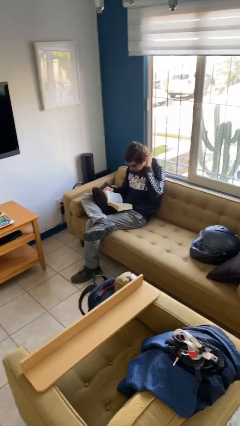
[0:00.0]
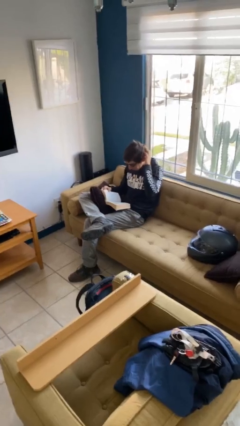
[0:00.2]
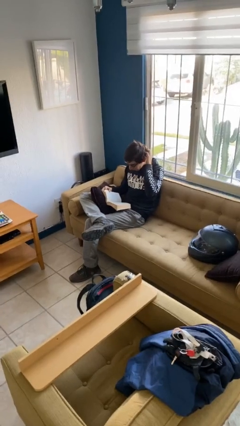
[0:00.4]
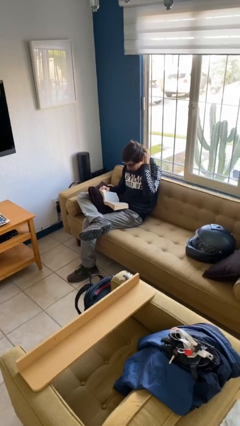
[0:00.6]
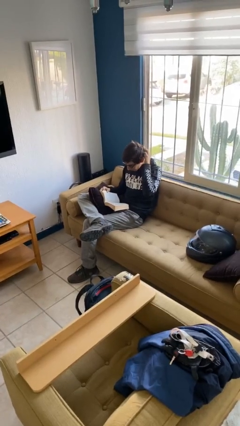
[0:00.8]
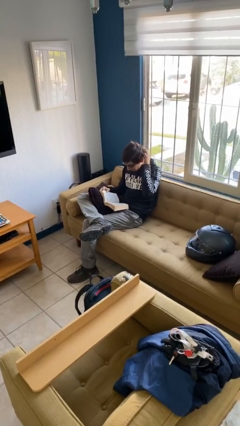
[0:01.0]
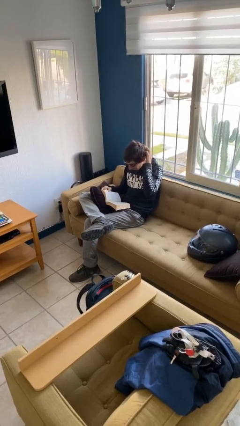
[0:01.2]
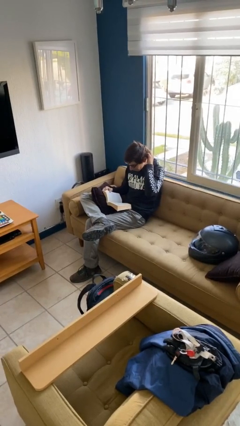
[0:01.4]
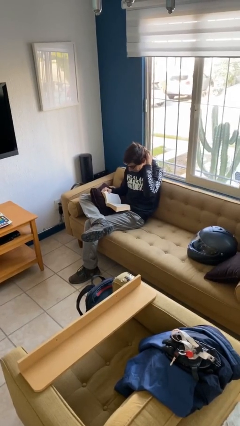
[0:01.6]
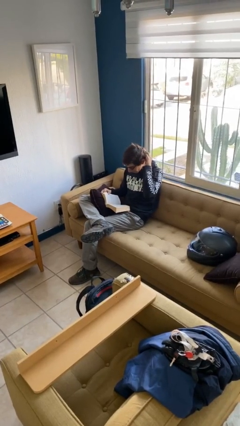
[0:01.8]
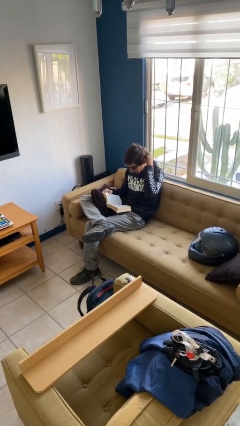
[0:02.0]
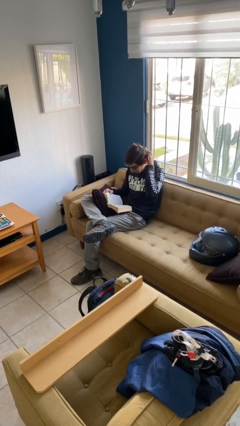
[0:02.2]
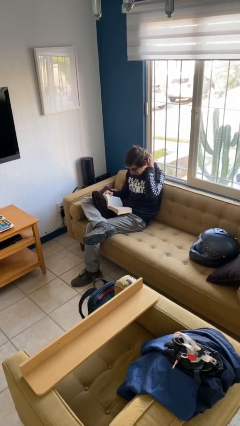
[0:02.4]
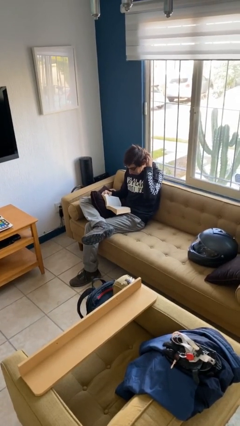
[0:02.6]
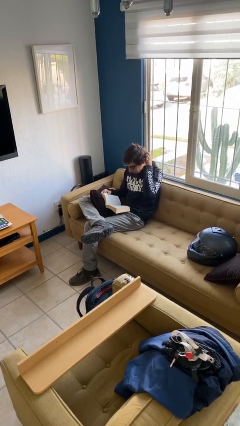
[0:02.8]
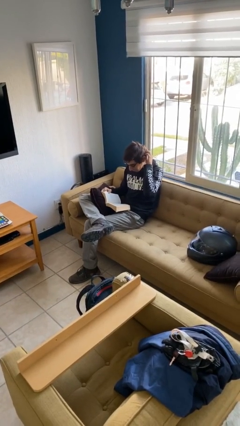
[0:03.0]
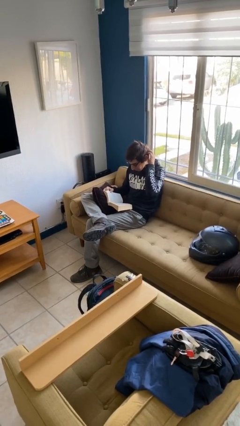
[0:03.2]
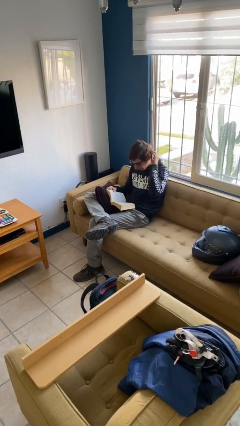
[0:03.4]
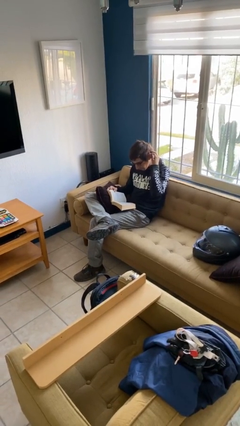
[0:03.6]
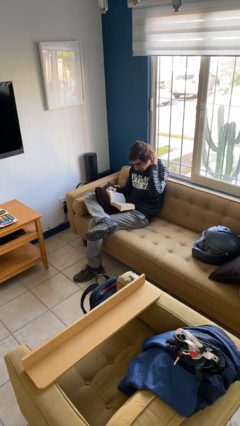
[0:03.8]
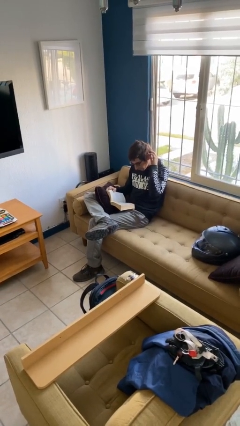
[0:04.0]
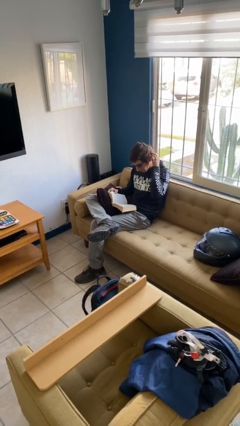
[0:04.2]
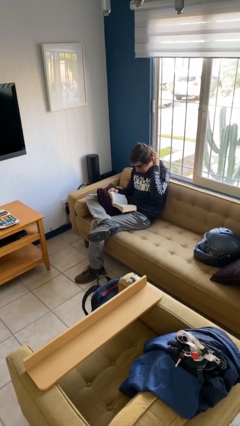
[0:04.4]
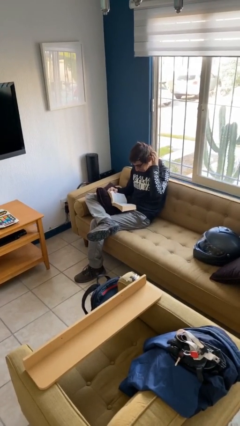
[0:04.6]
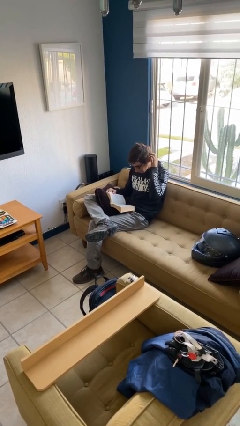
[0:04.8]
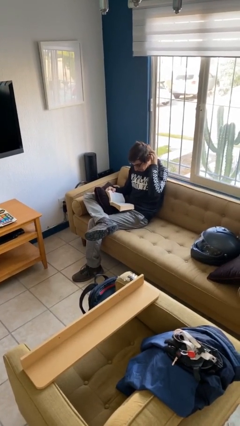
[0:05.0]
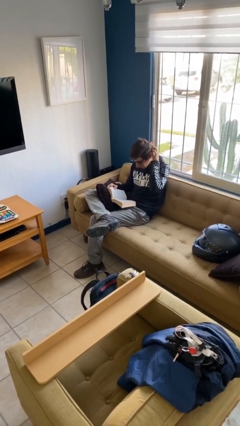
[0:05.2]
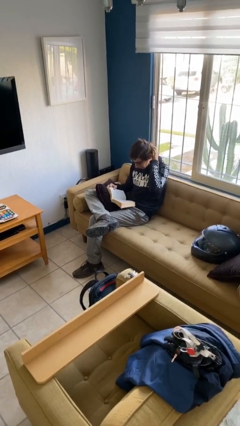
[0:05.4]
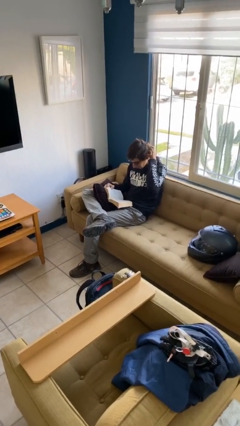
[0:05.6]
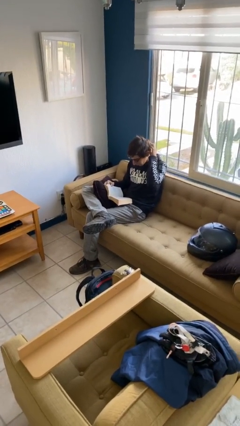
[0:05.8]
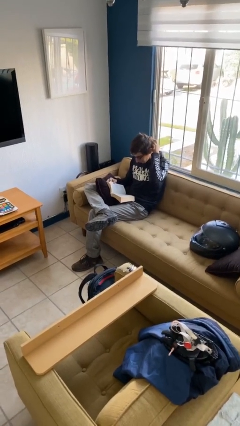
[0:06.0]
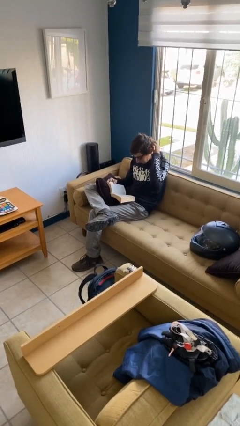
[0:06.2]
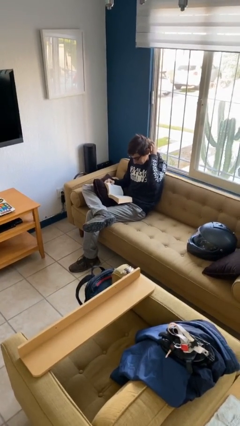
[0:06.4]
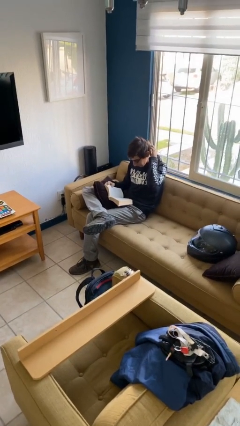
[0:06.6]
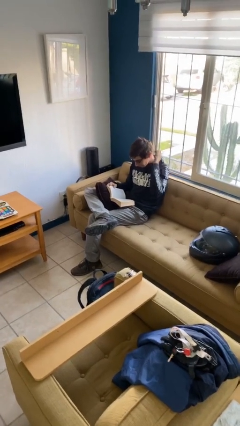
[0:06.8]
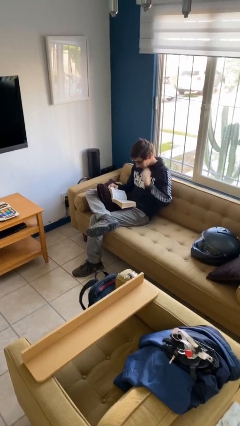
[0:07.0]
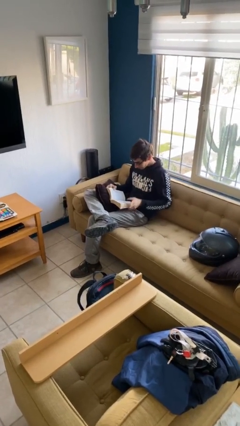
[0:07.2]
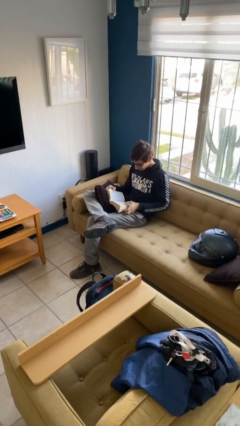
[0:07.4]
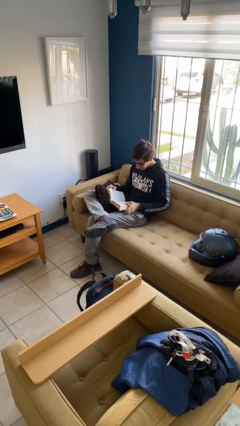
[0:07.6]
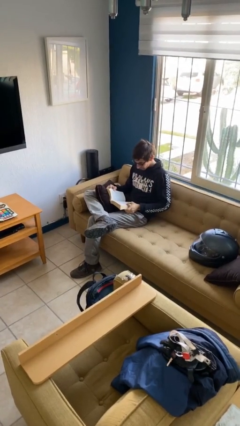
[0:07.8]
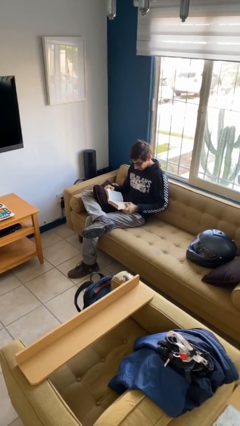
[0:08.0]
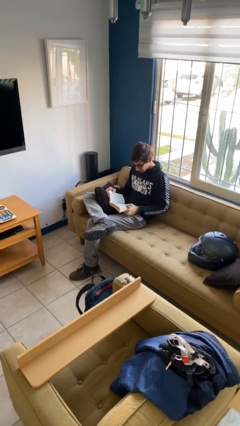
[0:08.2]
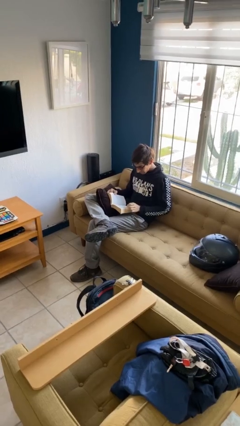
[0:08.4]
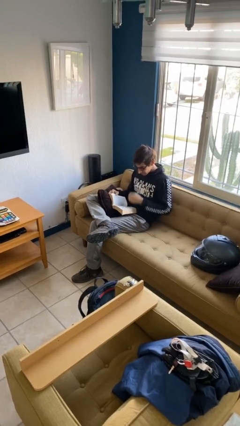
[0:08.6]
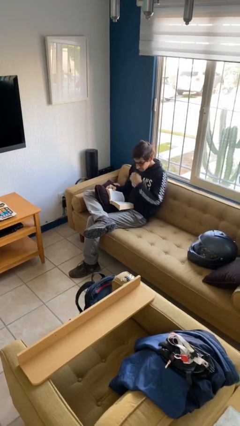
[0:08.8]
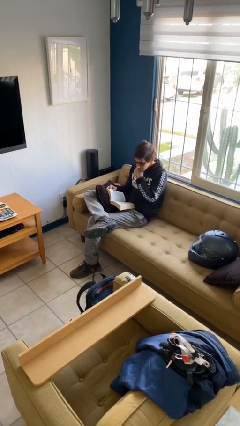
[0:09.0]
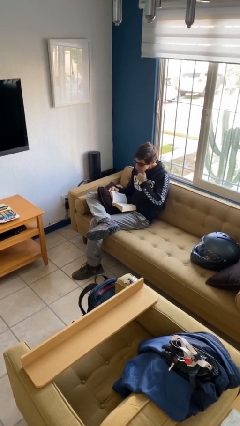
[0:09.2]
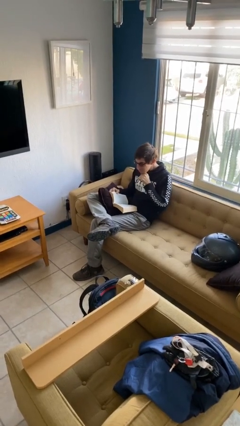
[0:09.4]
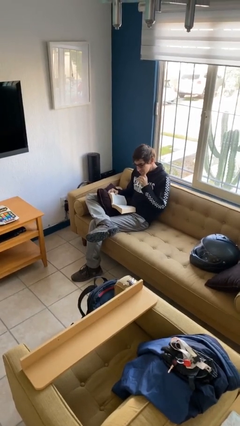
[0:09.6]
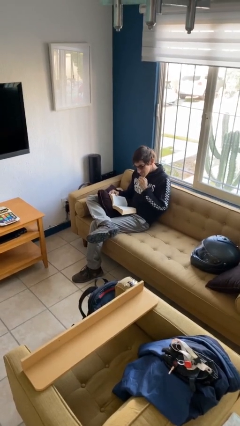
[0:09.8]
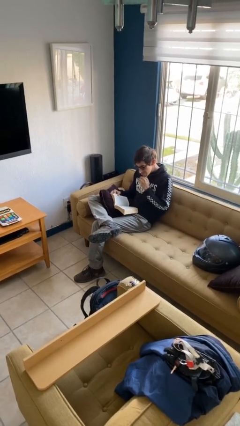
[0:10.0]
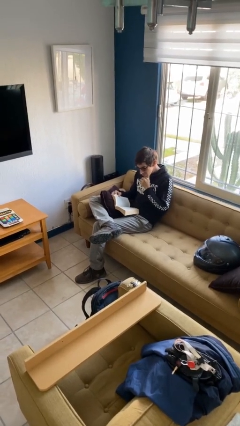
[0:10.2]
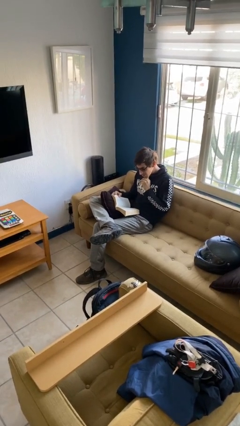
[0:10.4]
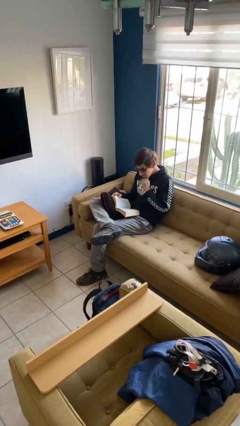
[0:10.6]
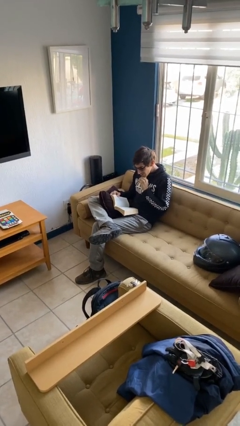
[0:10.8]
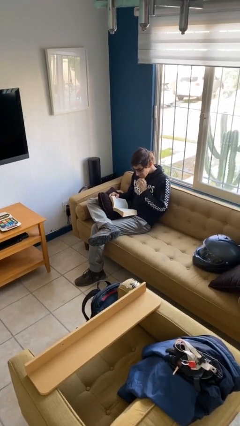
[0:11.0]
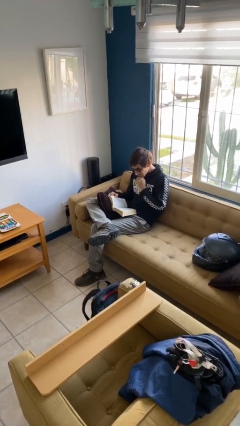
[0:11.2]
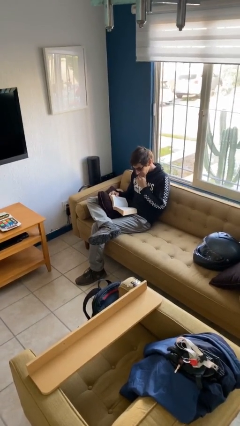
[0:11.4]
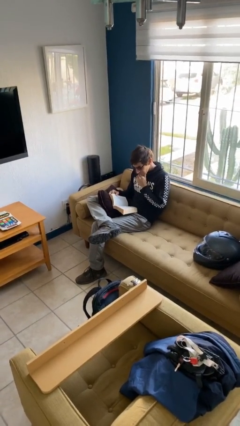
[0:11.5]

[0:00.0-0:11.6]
person reads document

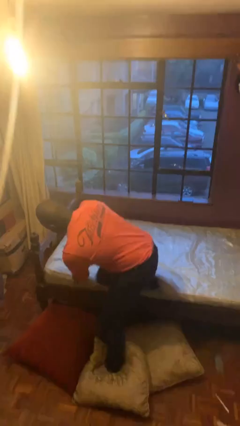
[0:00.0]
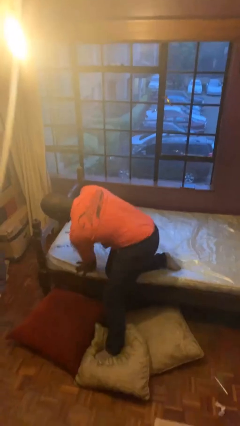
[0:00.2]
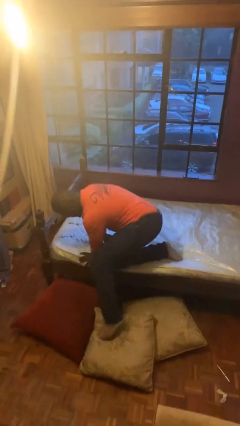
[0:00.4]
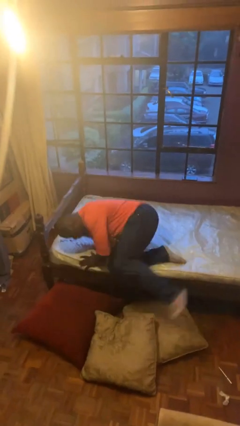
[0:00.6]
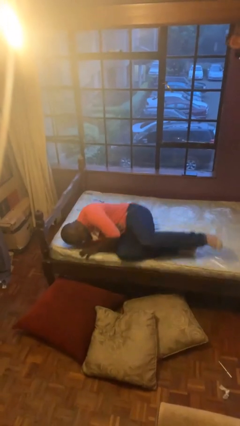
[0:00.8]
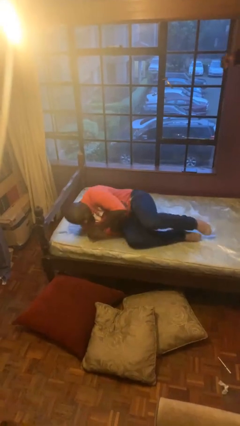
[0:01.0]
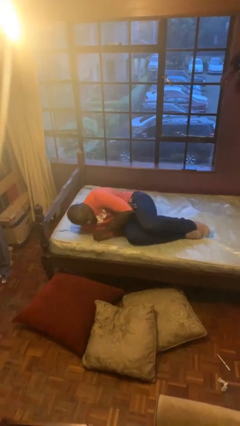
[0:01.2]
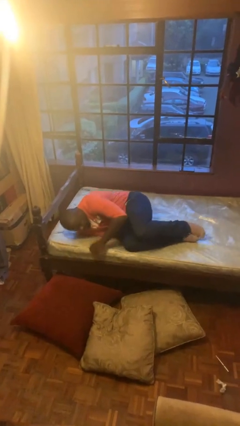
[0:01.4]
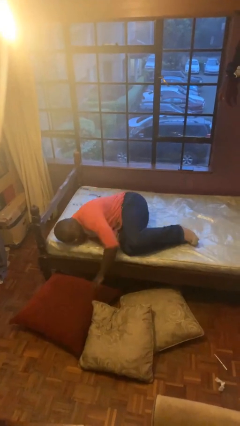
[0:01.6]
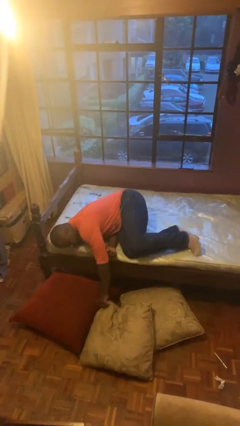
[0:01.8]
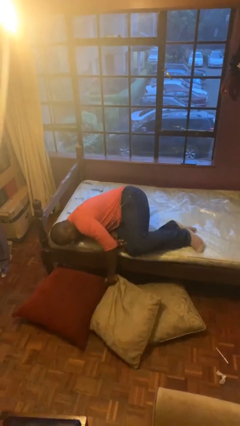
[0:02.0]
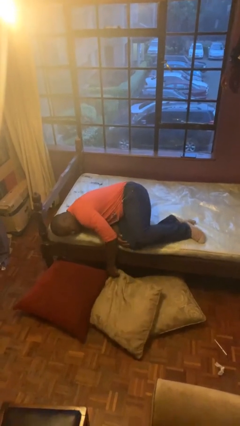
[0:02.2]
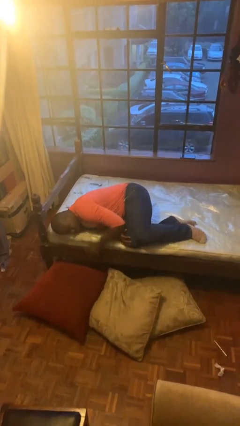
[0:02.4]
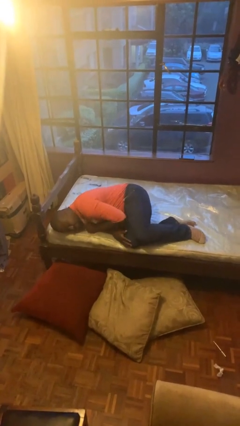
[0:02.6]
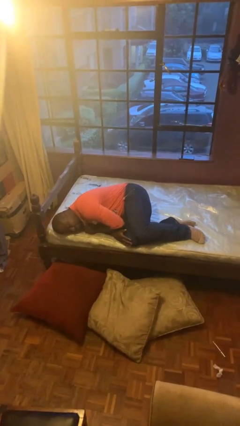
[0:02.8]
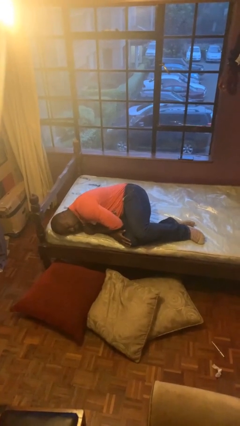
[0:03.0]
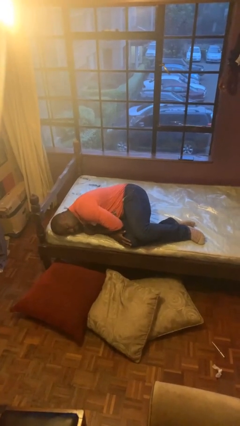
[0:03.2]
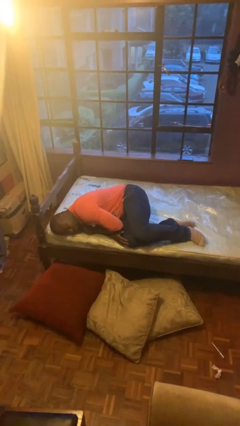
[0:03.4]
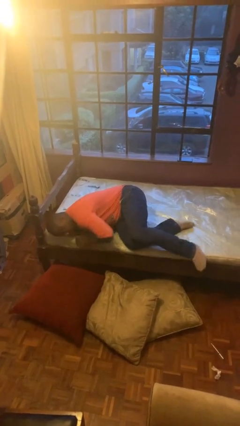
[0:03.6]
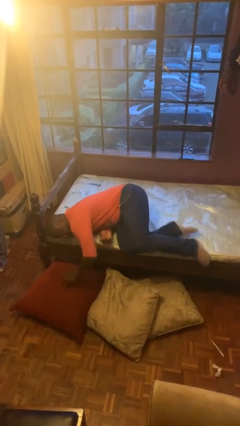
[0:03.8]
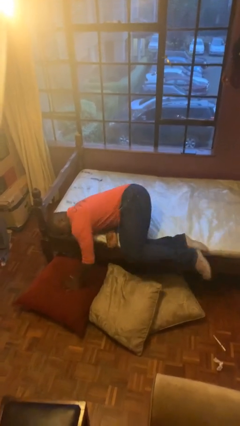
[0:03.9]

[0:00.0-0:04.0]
person lies down on bed

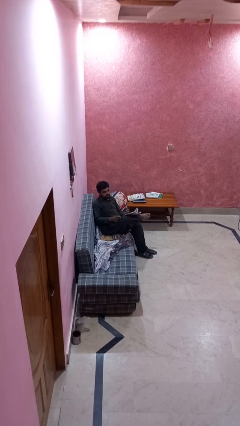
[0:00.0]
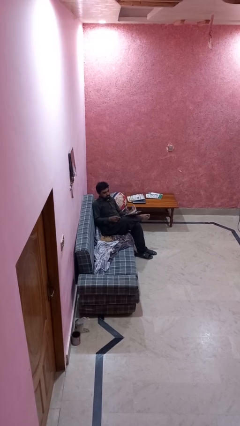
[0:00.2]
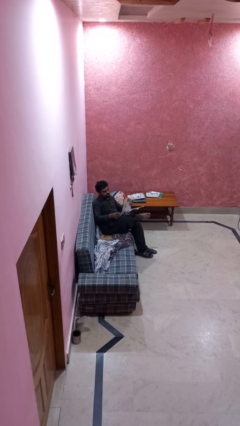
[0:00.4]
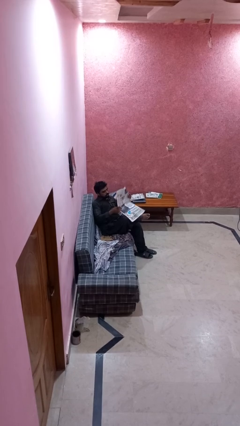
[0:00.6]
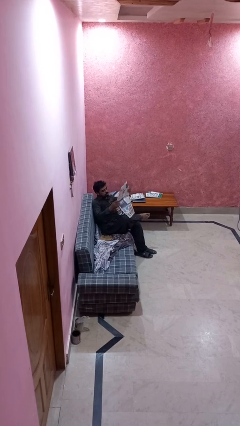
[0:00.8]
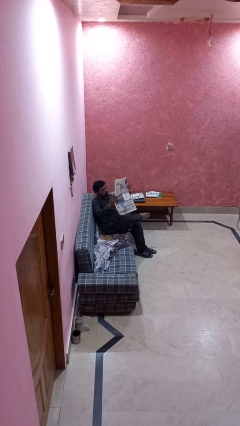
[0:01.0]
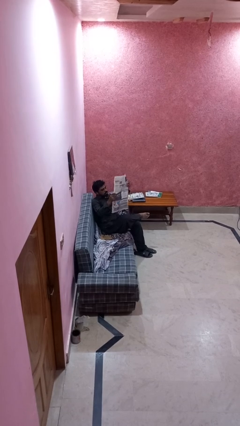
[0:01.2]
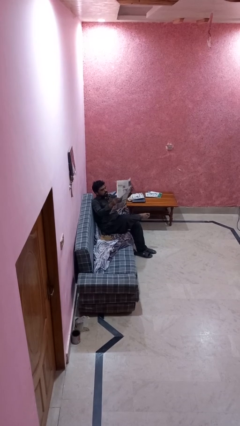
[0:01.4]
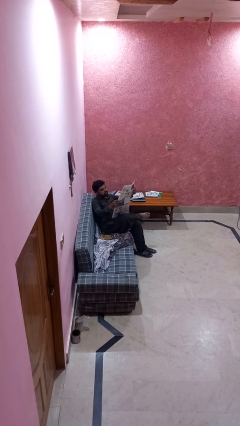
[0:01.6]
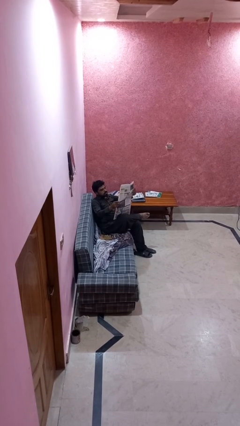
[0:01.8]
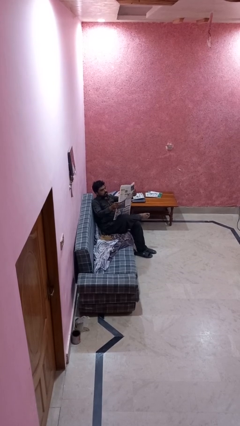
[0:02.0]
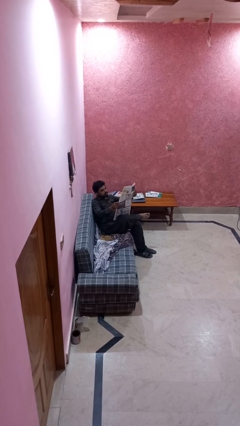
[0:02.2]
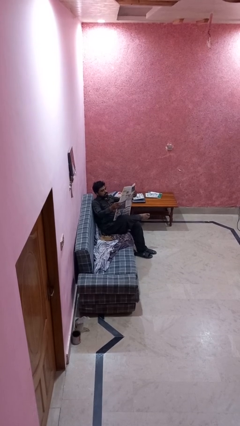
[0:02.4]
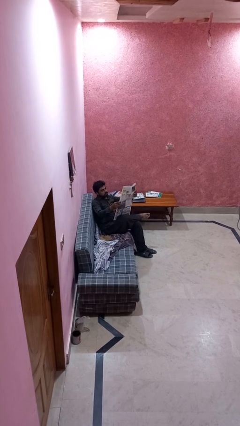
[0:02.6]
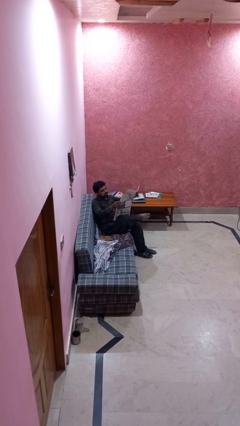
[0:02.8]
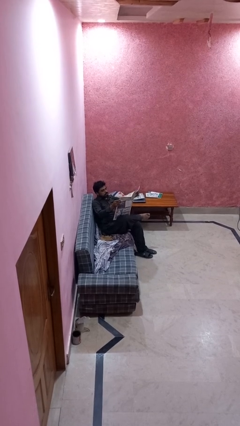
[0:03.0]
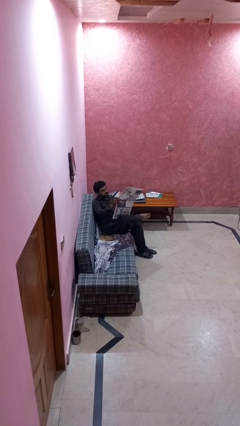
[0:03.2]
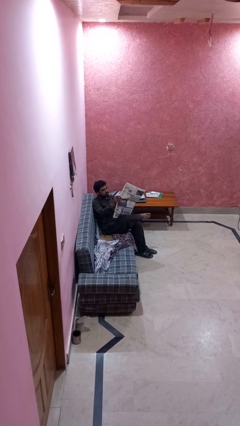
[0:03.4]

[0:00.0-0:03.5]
person reads newspaper
